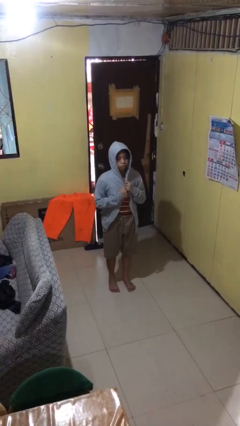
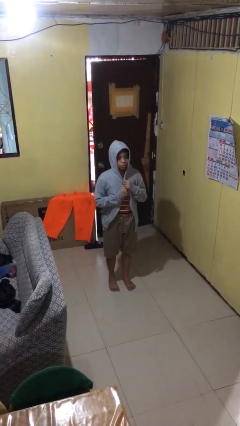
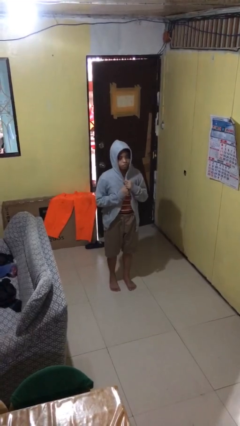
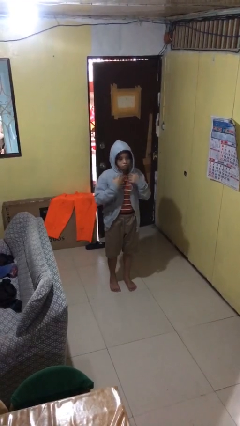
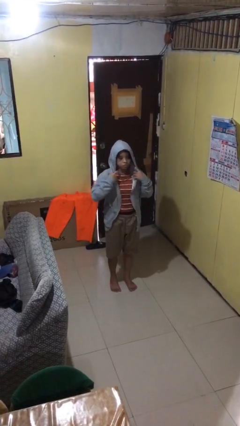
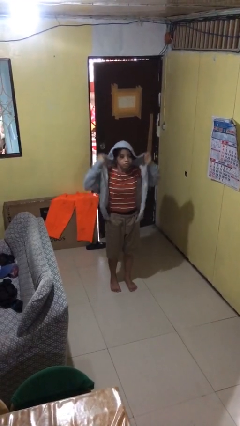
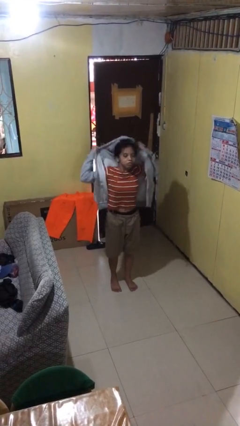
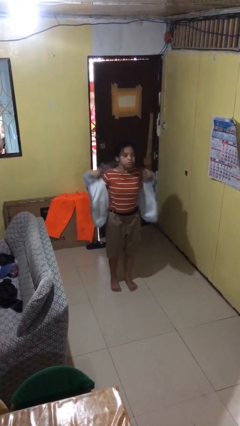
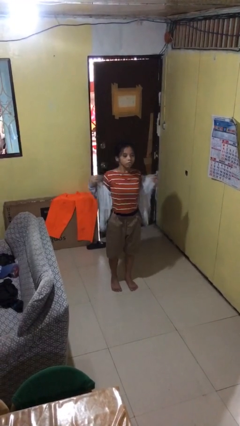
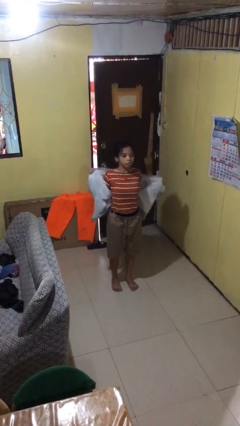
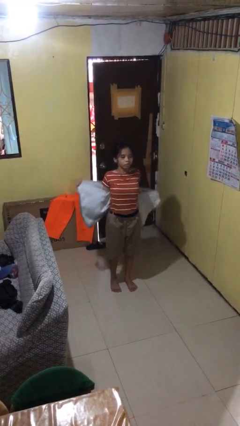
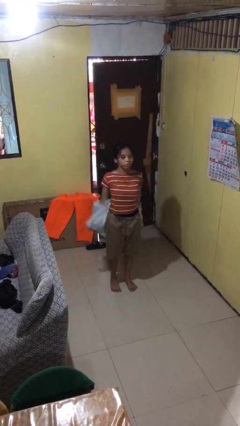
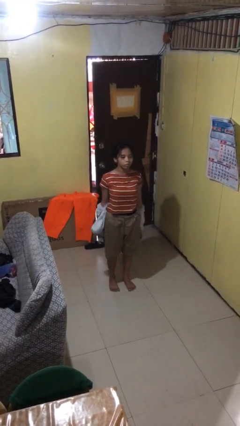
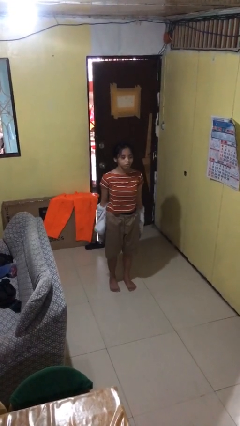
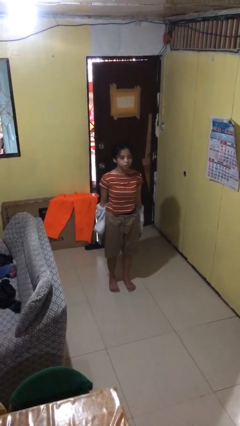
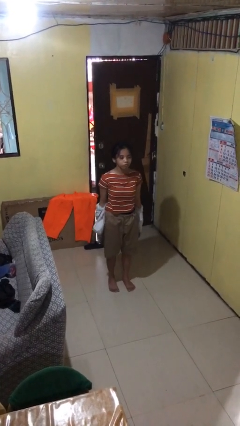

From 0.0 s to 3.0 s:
person takes off hoodie

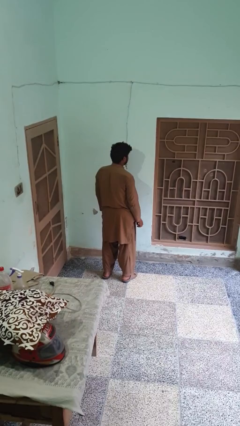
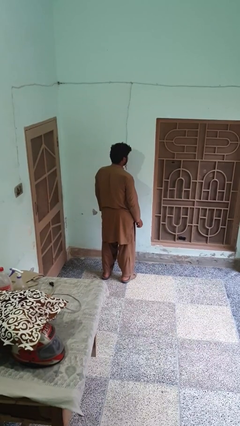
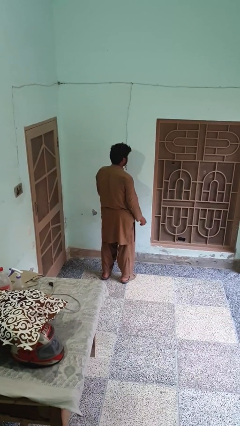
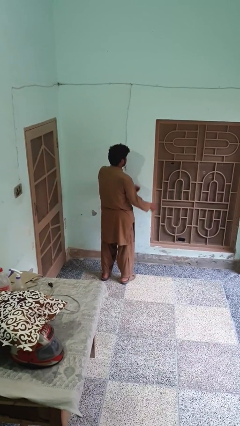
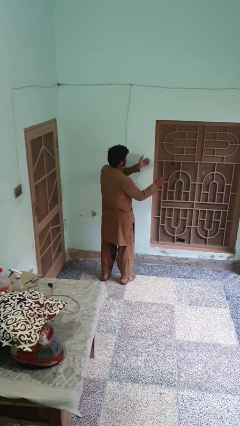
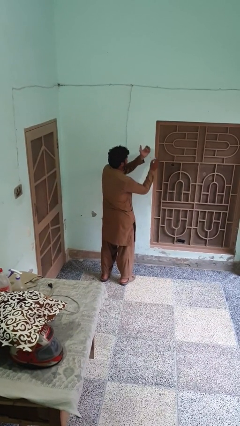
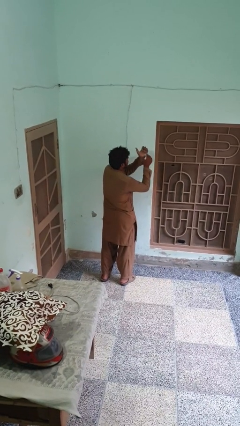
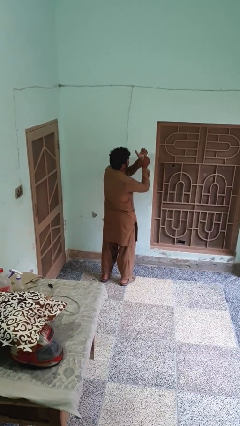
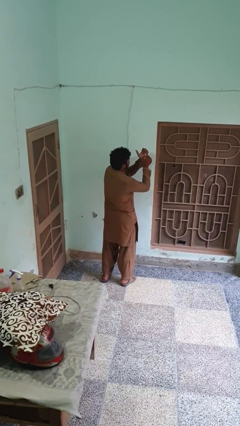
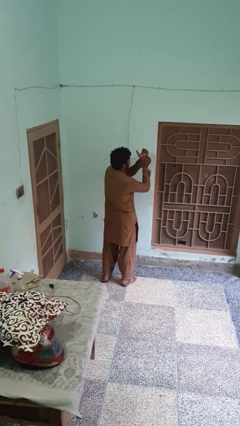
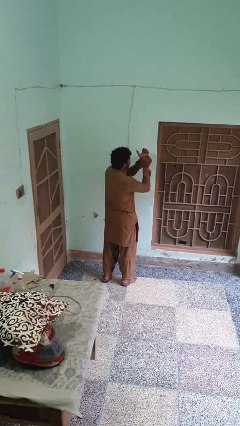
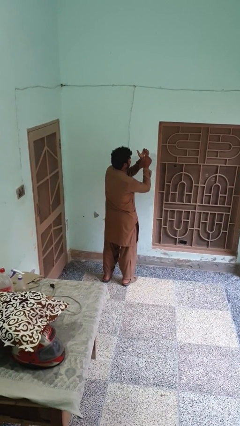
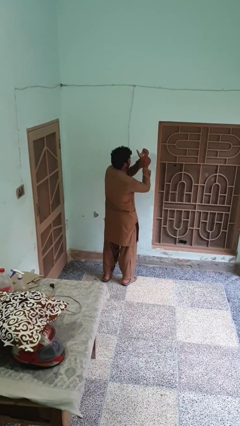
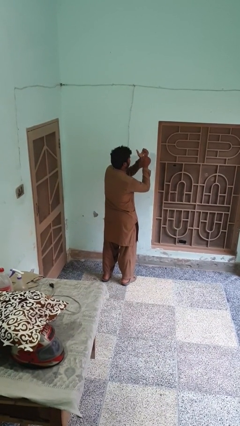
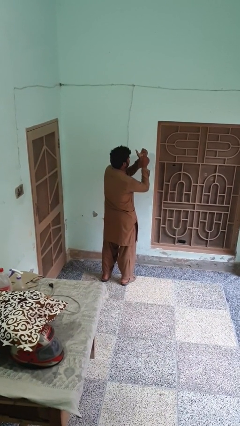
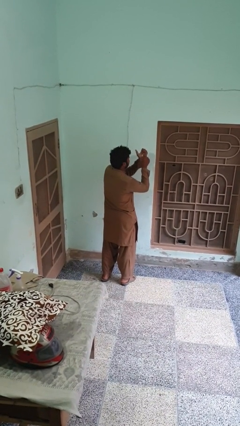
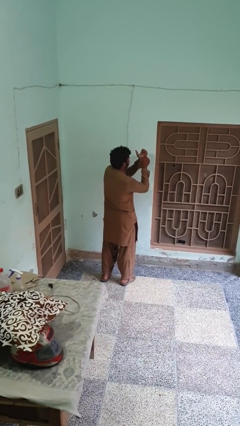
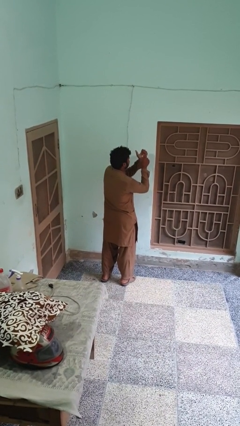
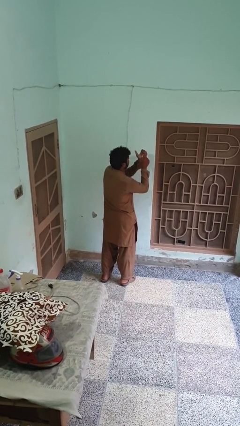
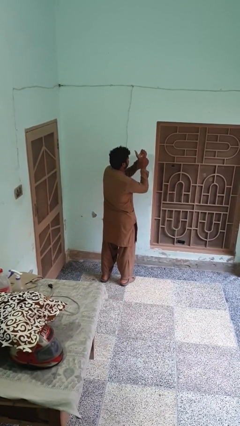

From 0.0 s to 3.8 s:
person paints fingernails

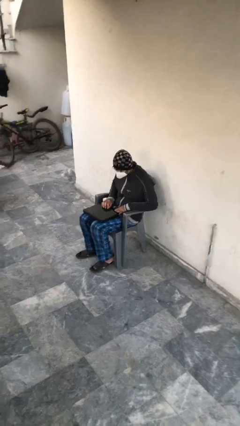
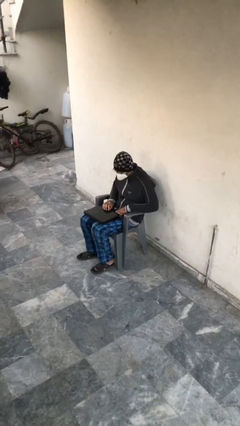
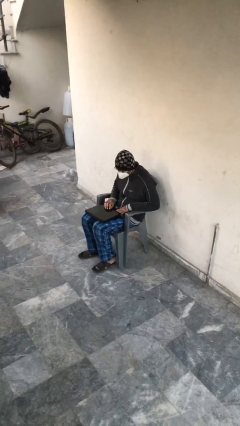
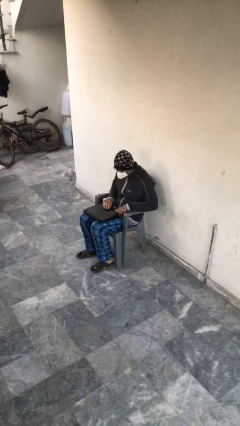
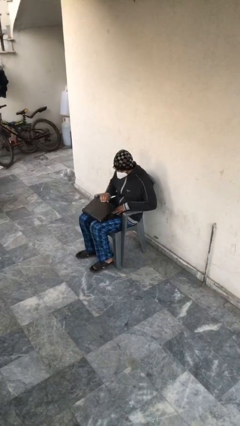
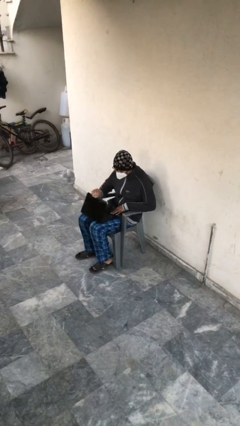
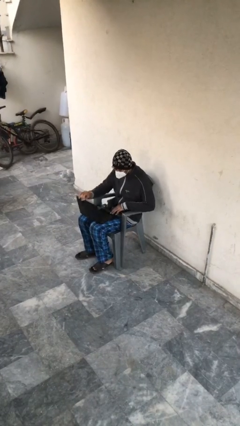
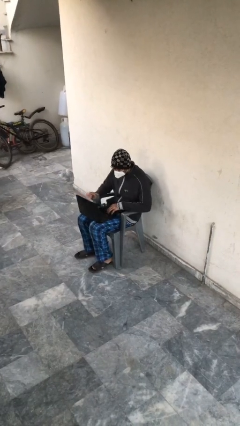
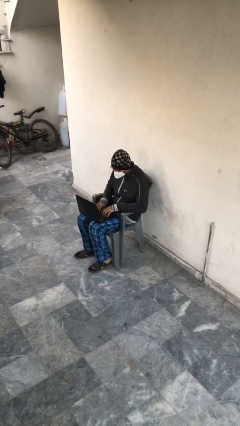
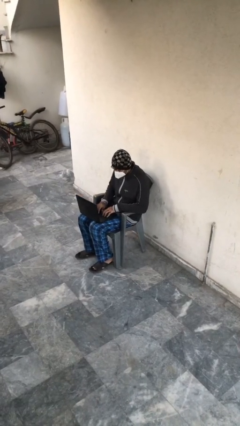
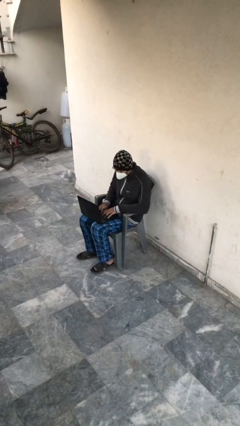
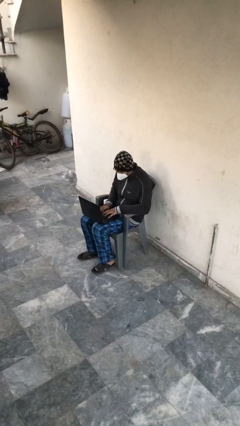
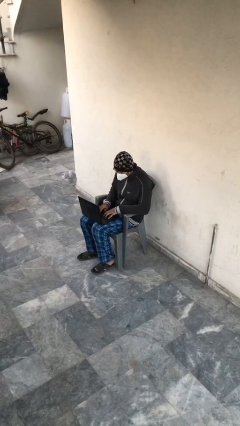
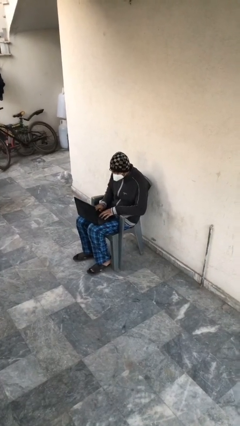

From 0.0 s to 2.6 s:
person interacts with laptop

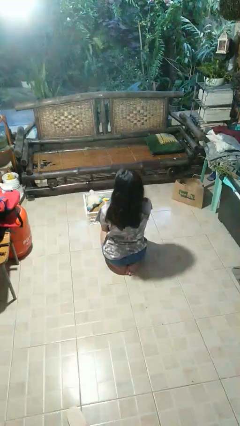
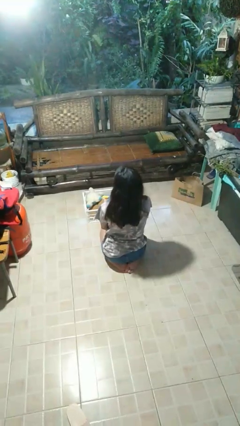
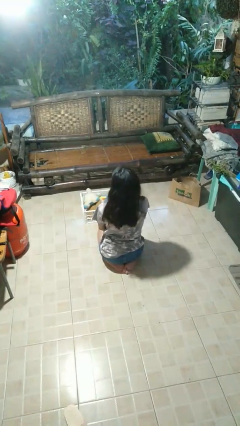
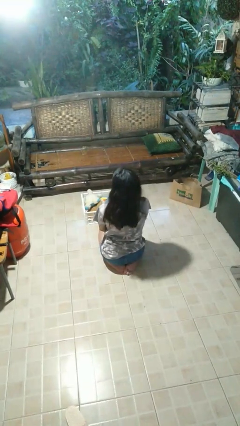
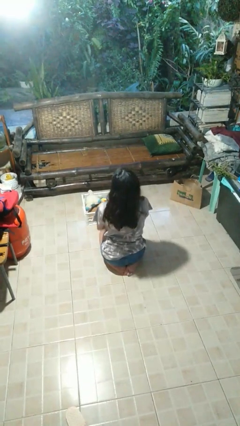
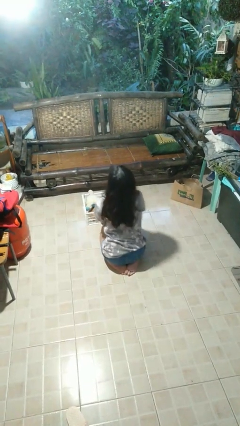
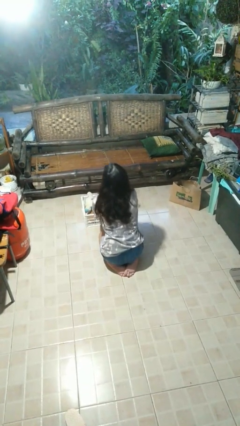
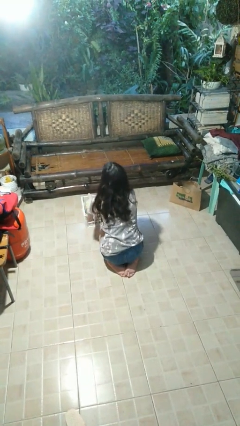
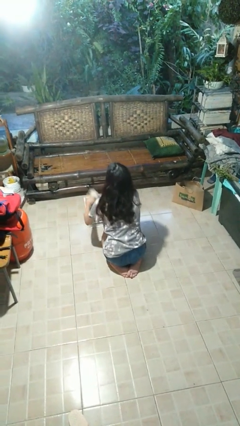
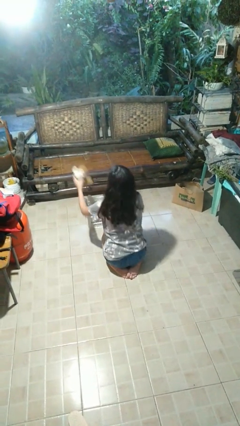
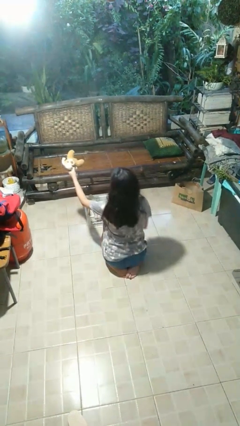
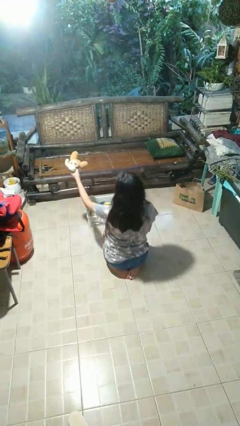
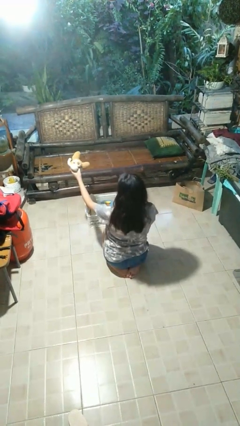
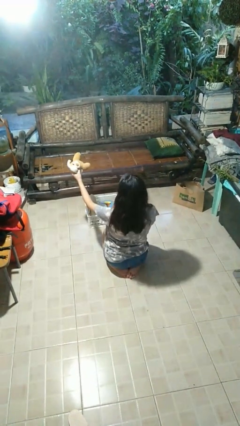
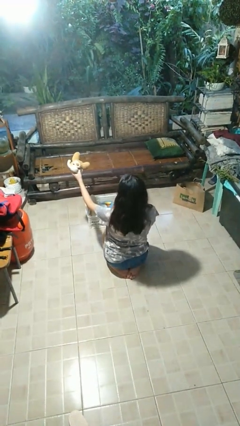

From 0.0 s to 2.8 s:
person takes object from basket

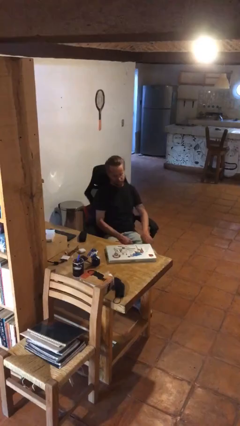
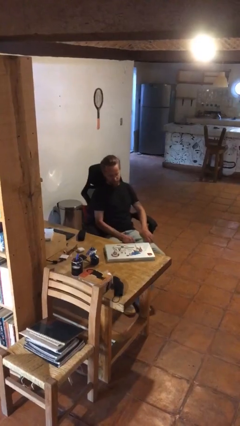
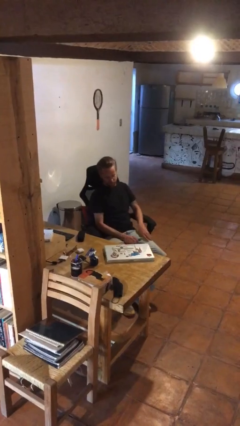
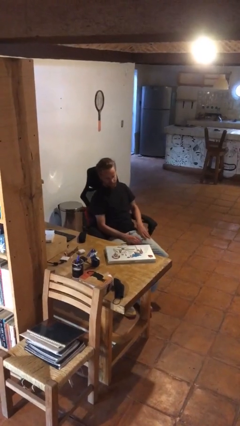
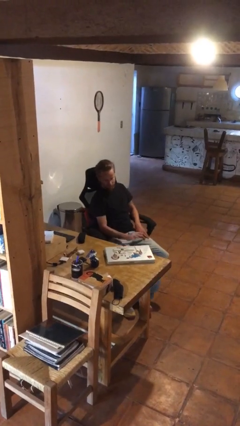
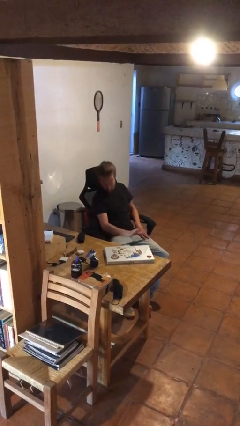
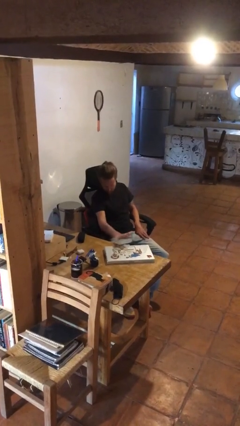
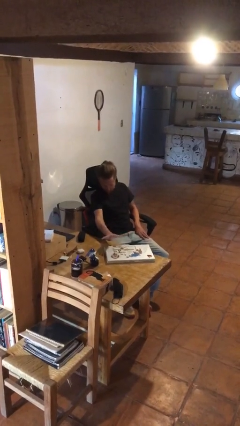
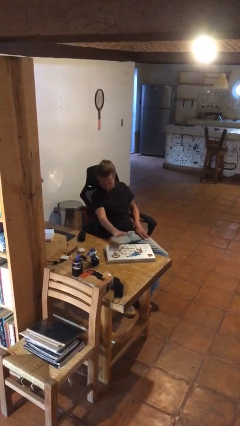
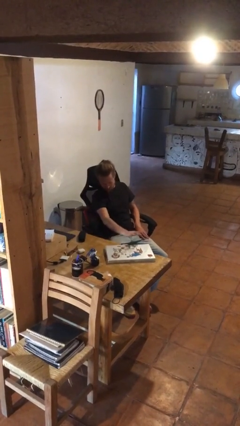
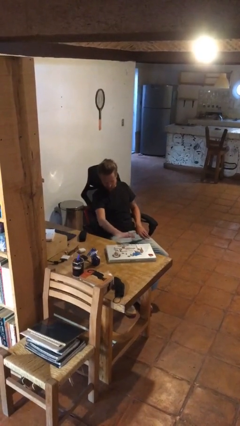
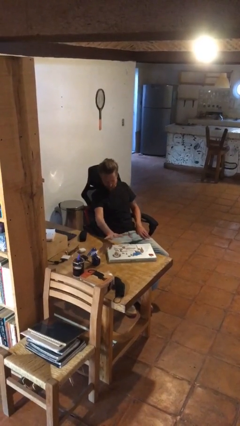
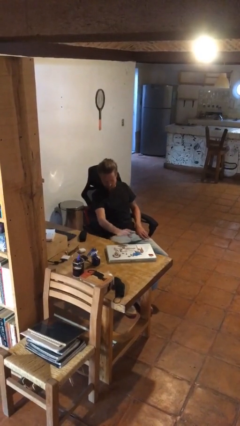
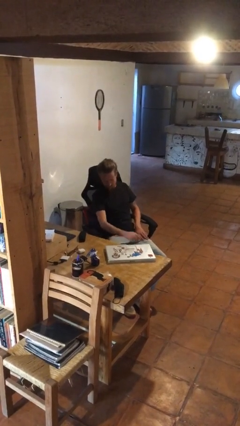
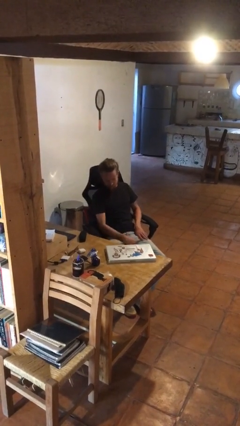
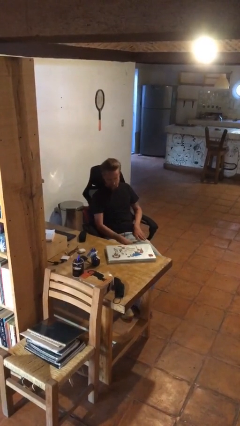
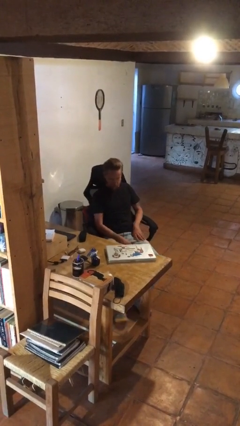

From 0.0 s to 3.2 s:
person waves hand over object

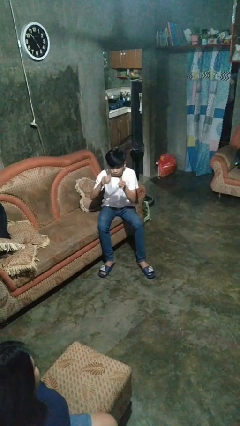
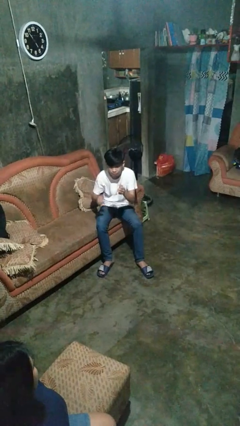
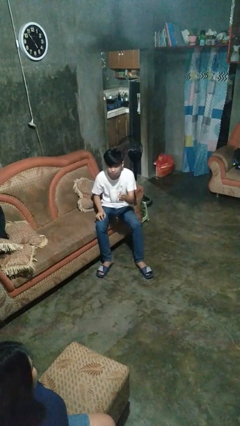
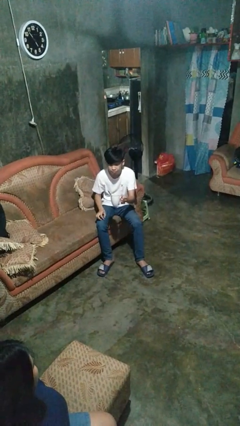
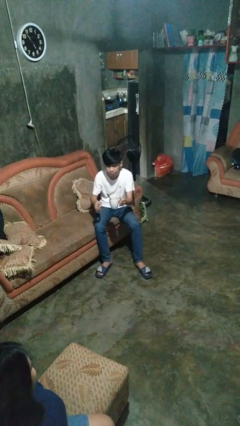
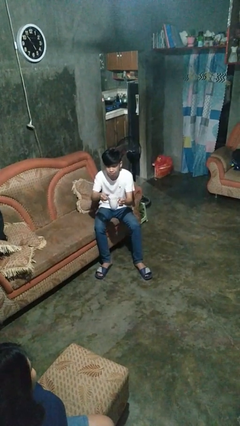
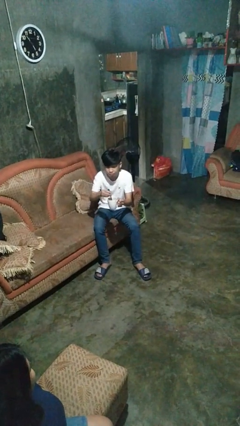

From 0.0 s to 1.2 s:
person stirs mug

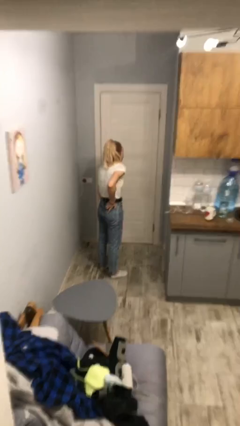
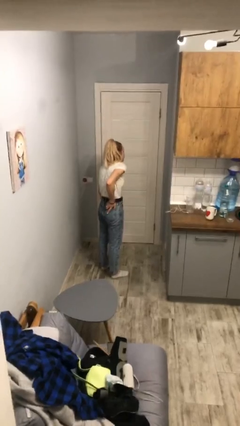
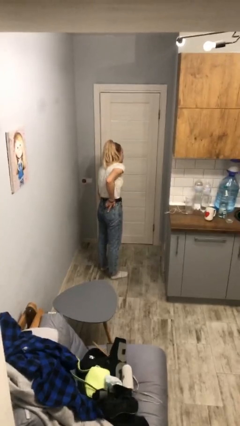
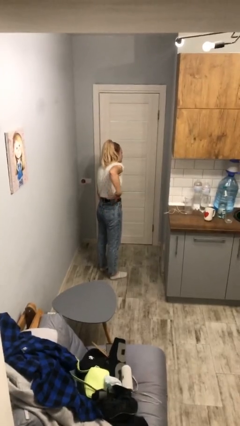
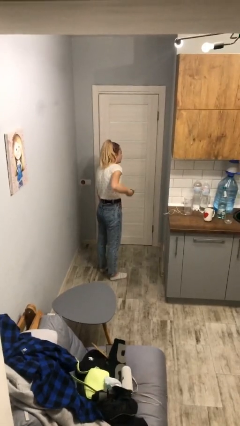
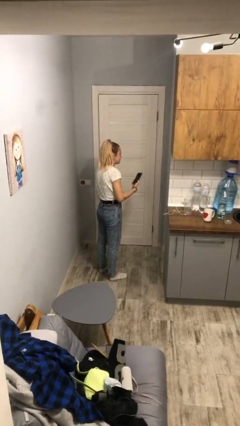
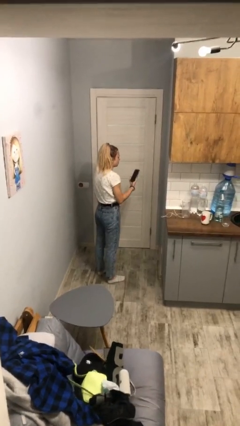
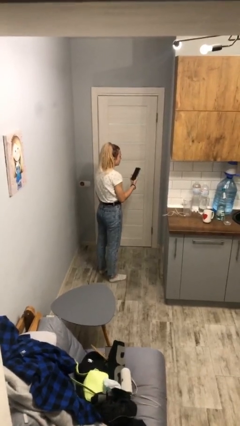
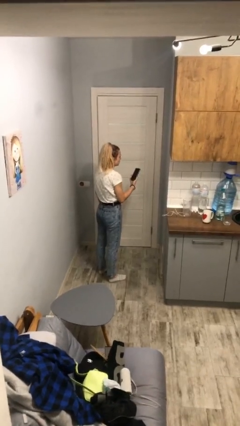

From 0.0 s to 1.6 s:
person takes phone from pocket
